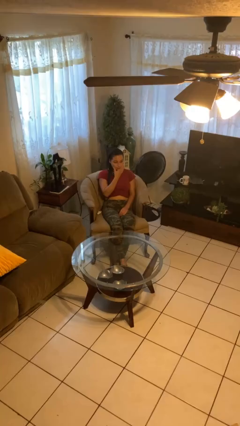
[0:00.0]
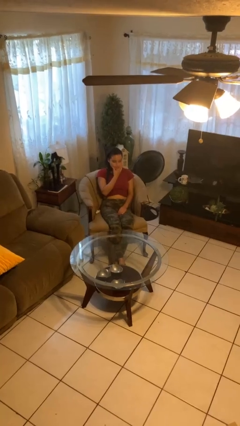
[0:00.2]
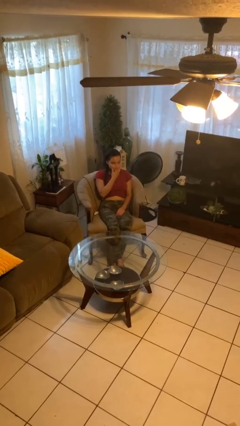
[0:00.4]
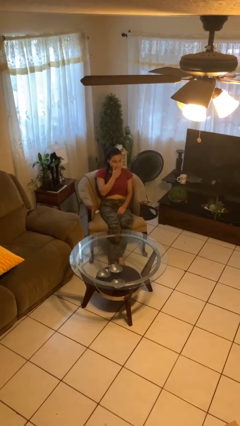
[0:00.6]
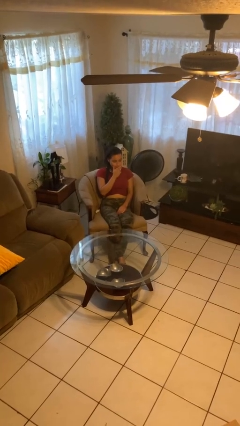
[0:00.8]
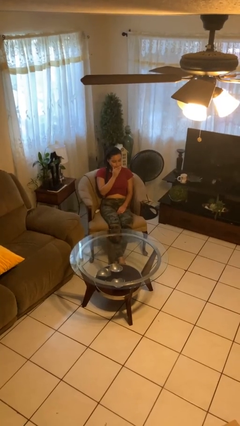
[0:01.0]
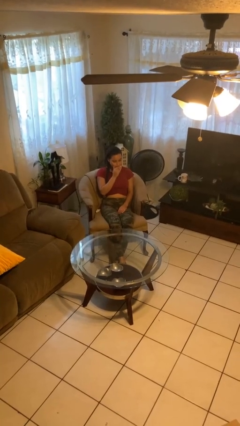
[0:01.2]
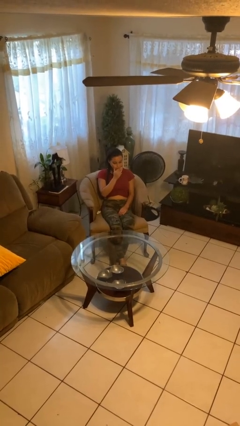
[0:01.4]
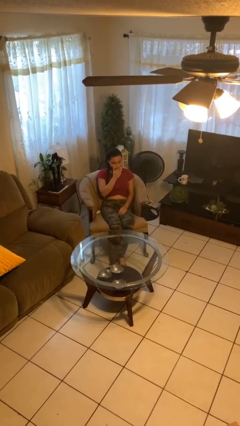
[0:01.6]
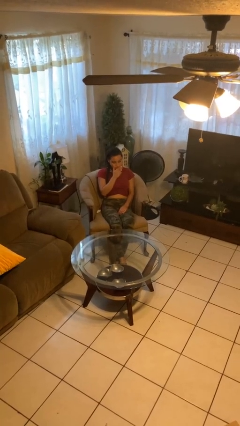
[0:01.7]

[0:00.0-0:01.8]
person strokes chin

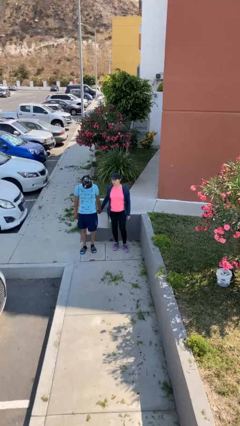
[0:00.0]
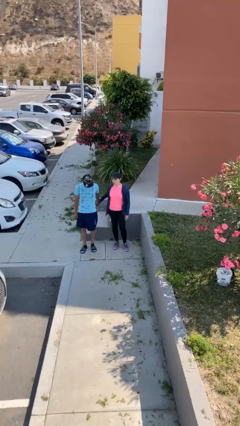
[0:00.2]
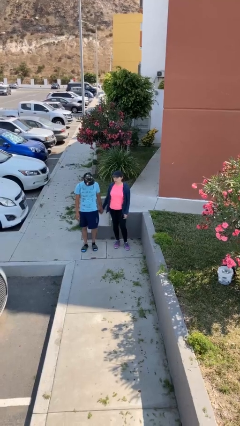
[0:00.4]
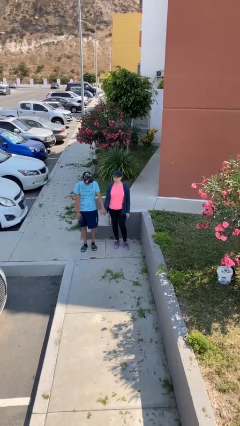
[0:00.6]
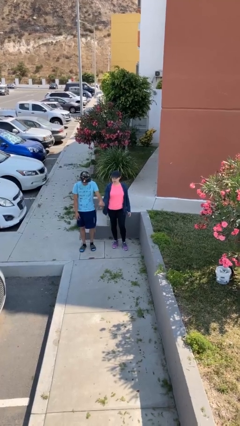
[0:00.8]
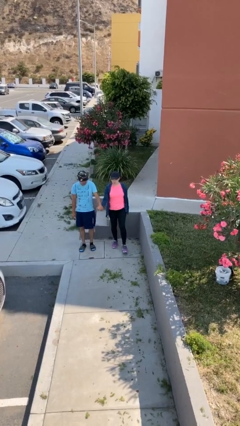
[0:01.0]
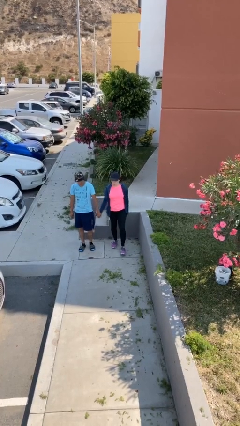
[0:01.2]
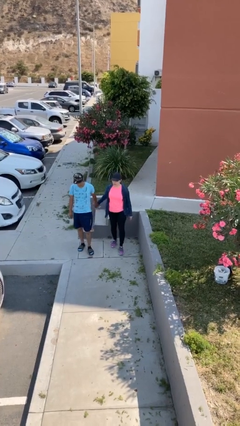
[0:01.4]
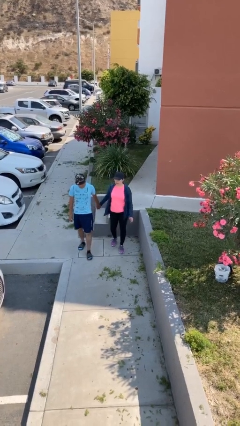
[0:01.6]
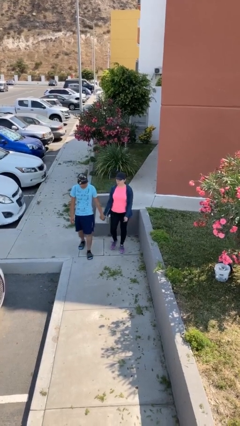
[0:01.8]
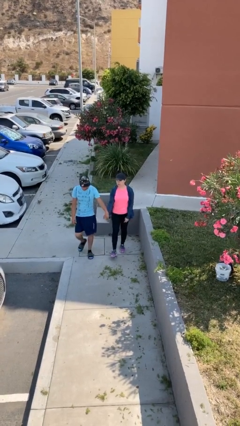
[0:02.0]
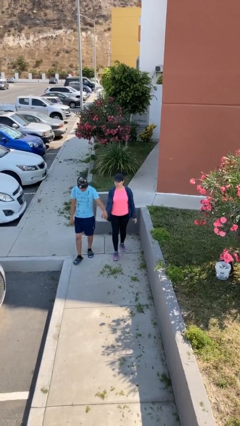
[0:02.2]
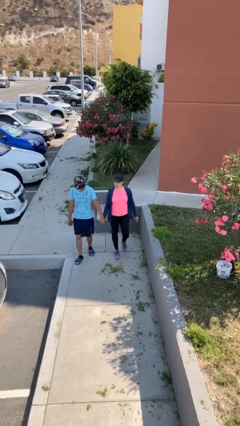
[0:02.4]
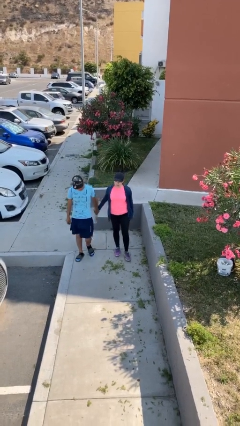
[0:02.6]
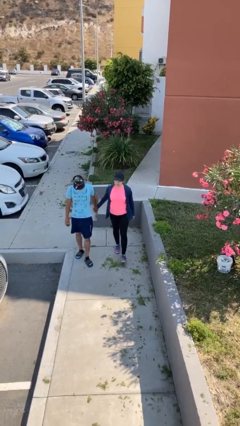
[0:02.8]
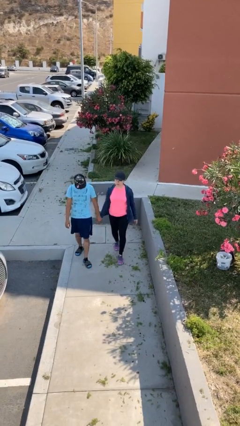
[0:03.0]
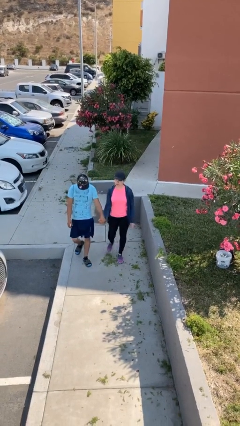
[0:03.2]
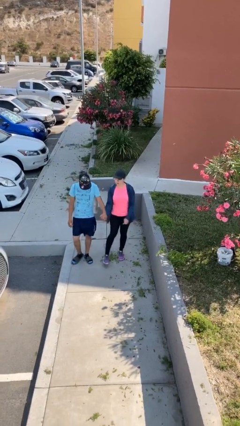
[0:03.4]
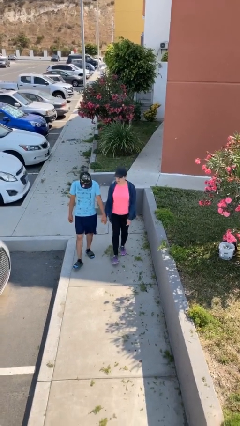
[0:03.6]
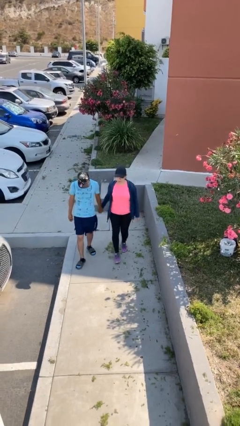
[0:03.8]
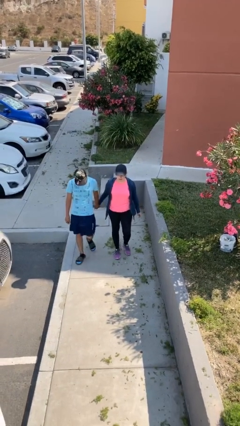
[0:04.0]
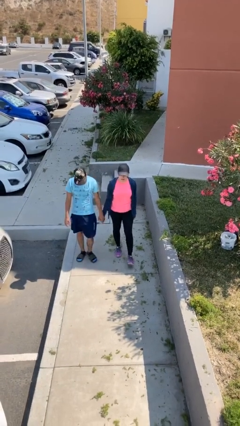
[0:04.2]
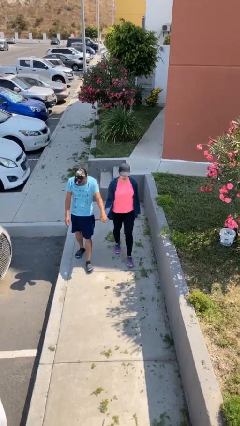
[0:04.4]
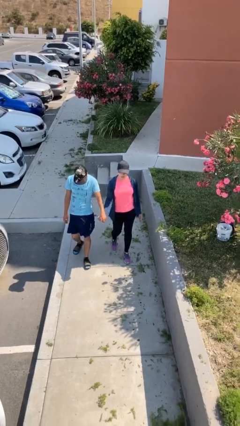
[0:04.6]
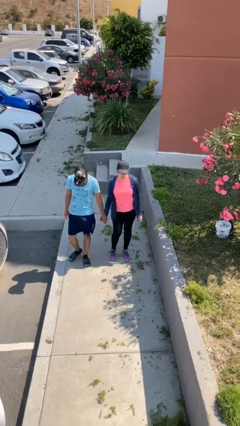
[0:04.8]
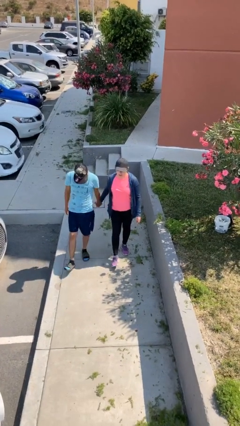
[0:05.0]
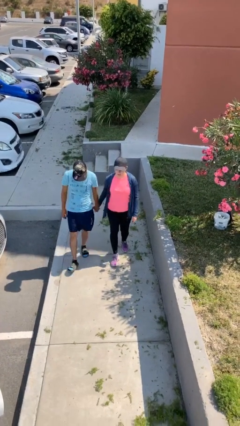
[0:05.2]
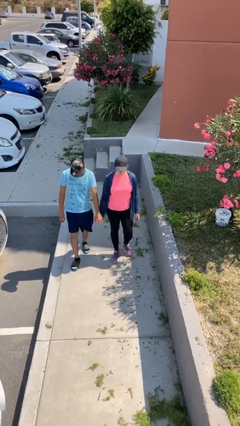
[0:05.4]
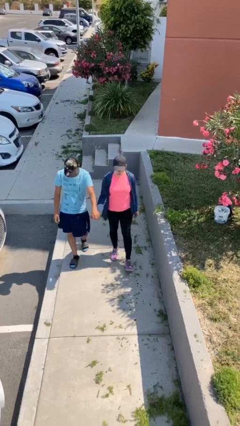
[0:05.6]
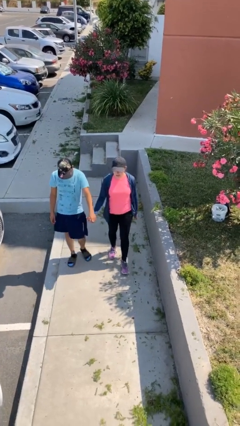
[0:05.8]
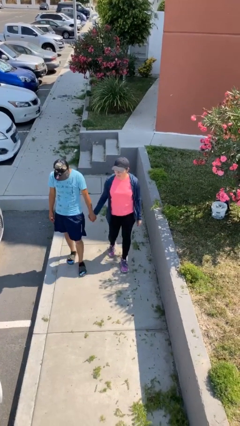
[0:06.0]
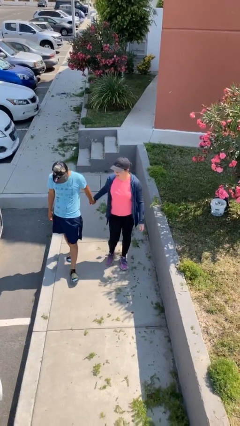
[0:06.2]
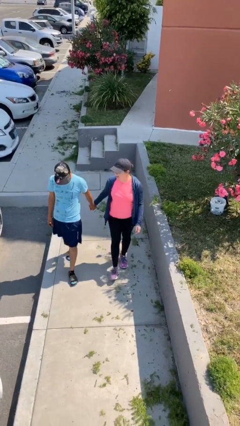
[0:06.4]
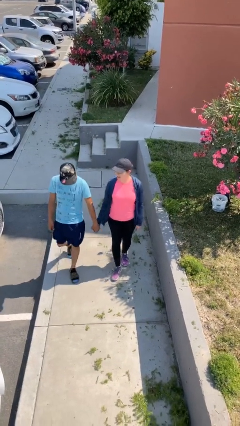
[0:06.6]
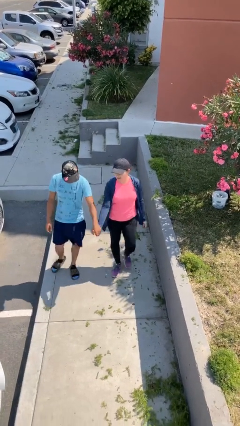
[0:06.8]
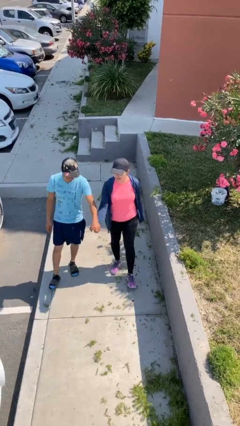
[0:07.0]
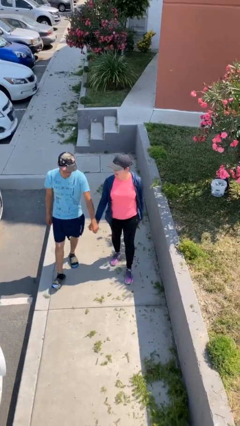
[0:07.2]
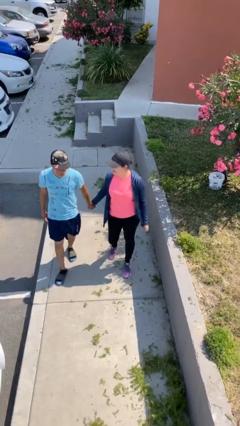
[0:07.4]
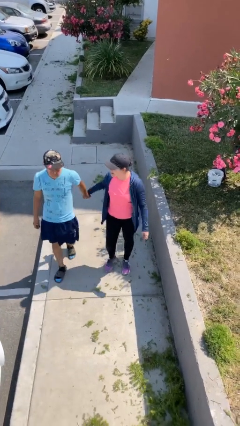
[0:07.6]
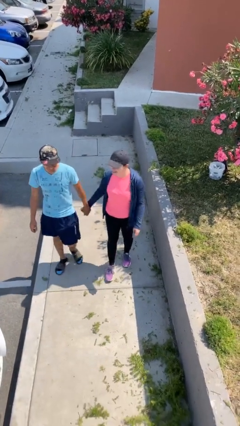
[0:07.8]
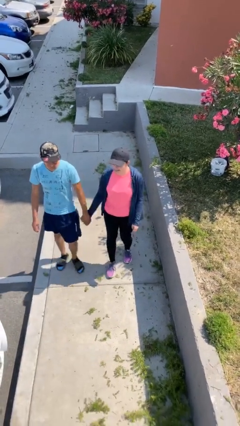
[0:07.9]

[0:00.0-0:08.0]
person holds hand

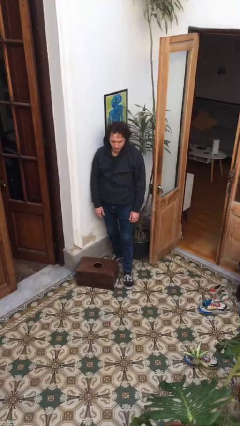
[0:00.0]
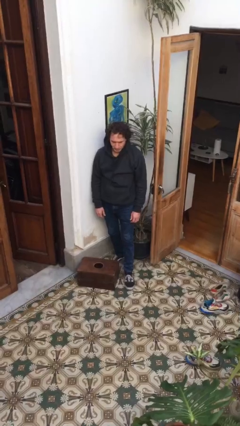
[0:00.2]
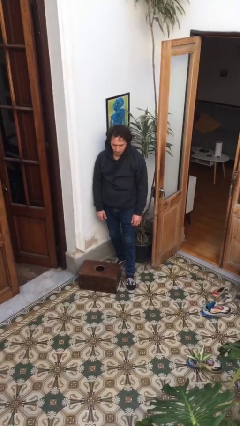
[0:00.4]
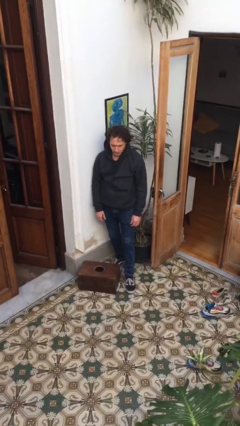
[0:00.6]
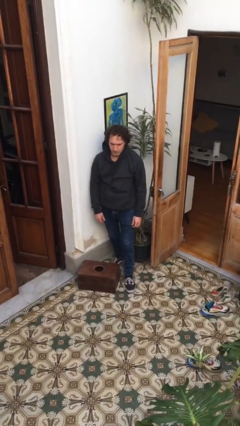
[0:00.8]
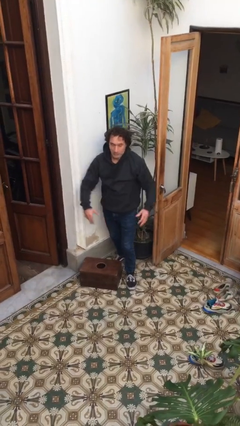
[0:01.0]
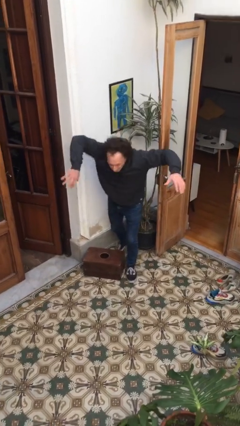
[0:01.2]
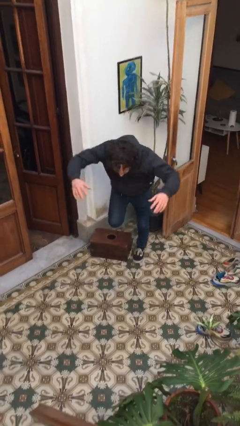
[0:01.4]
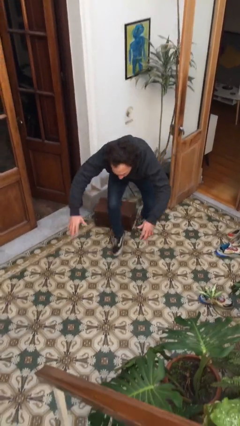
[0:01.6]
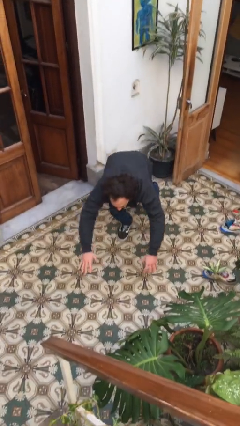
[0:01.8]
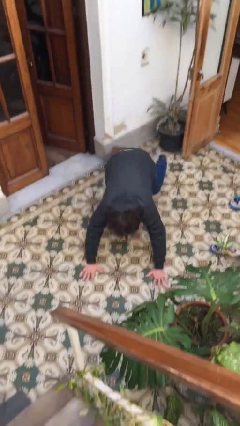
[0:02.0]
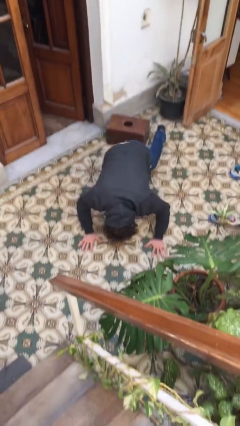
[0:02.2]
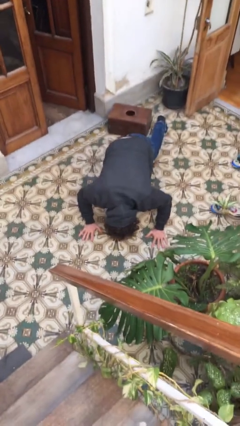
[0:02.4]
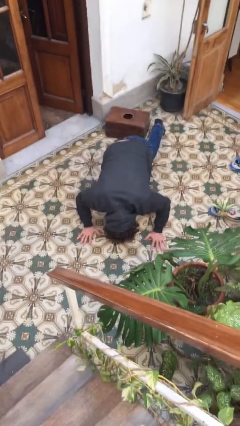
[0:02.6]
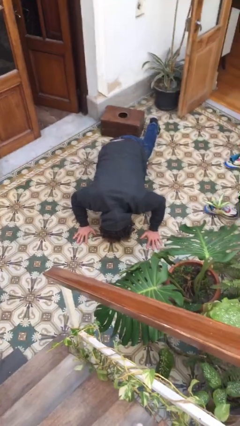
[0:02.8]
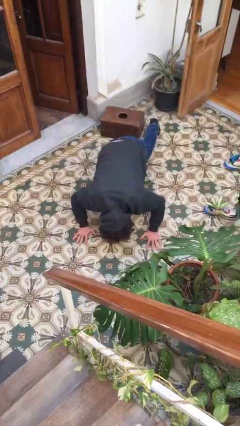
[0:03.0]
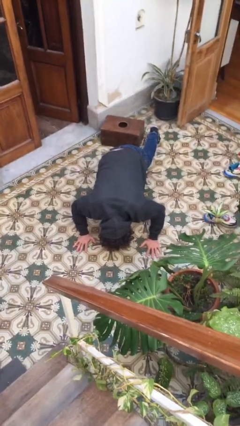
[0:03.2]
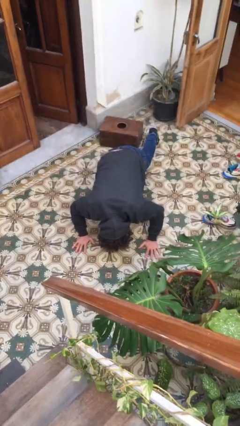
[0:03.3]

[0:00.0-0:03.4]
person trips on object on floor

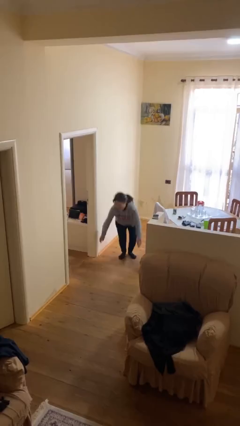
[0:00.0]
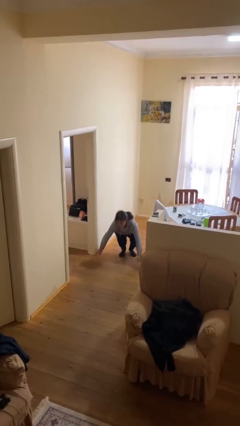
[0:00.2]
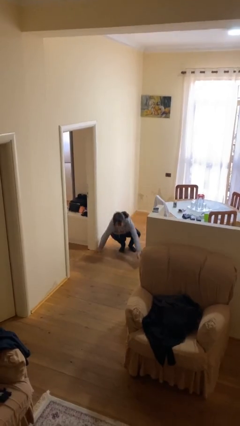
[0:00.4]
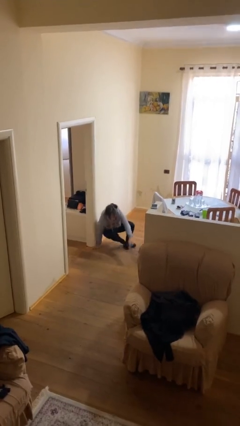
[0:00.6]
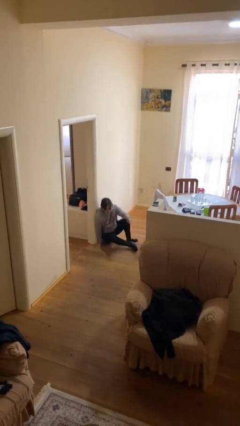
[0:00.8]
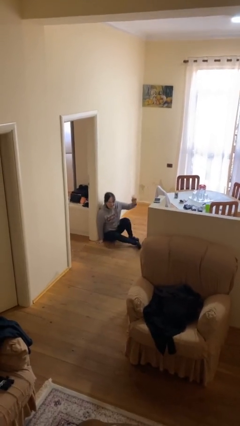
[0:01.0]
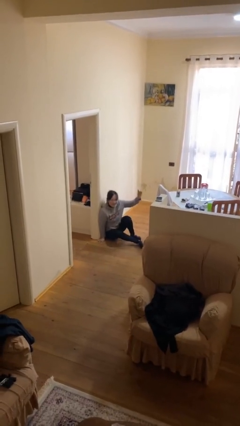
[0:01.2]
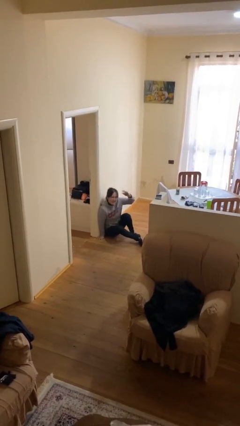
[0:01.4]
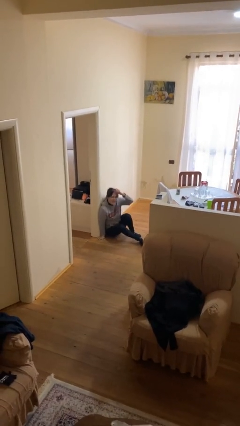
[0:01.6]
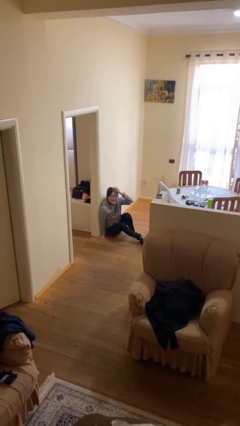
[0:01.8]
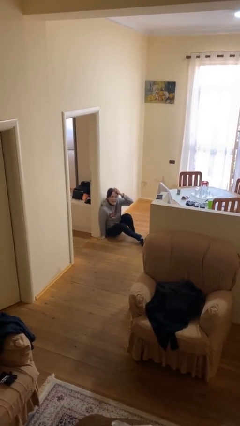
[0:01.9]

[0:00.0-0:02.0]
person sits down

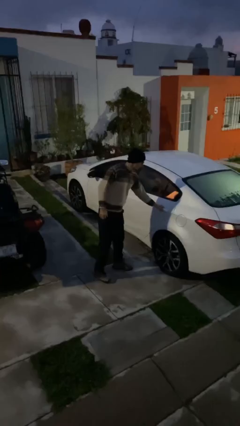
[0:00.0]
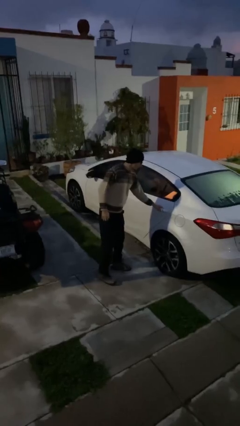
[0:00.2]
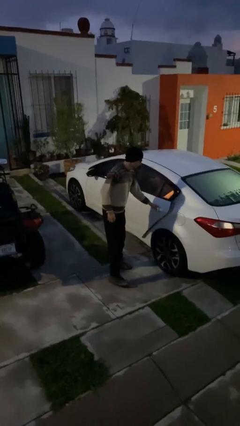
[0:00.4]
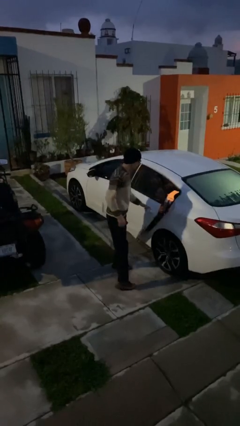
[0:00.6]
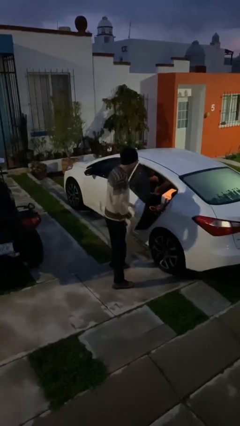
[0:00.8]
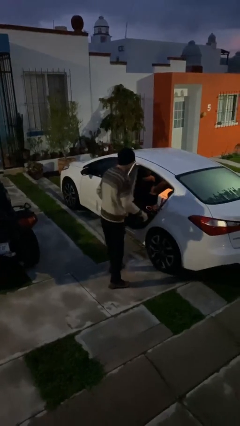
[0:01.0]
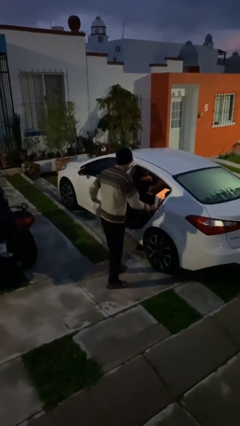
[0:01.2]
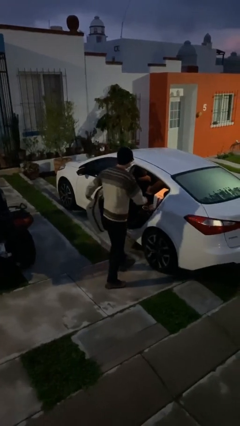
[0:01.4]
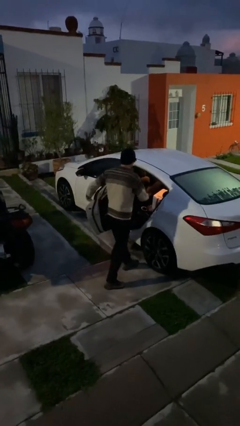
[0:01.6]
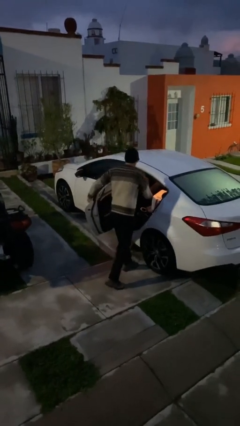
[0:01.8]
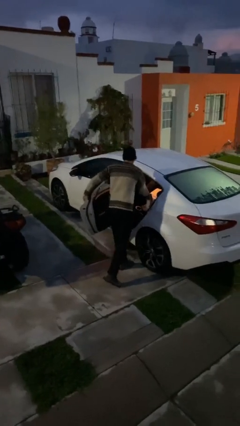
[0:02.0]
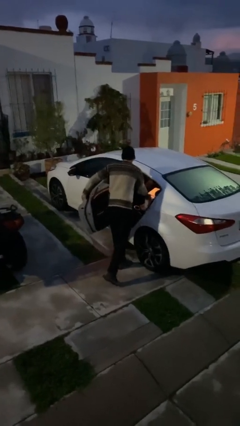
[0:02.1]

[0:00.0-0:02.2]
person opens car door

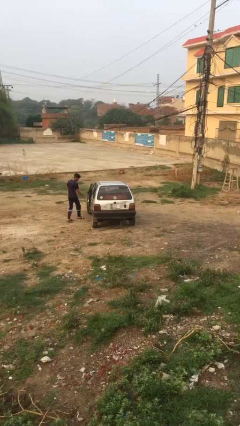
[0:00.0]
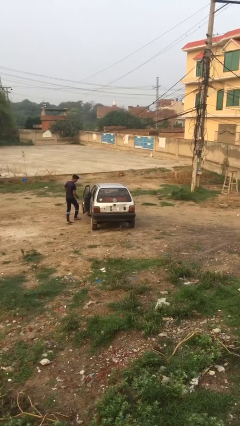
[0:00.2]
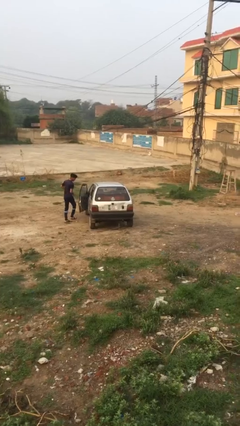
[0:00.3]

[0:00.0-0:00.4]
car picks up person
